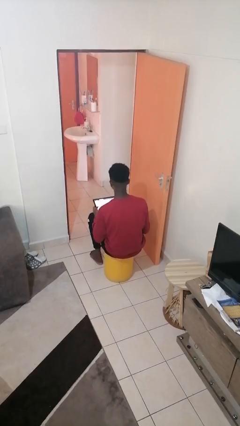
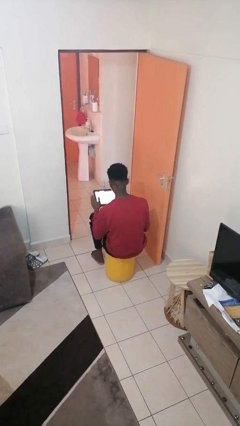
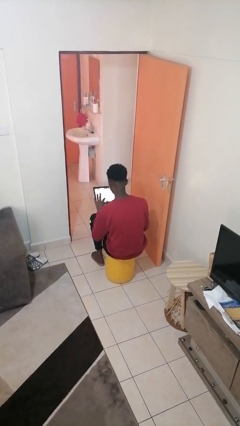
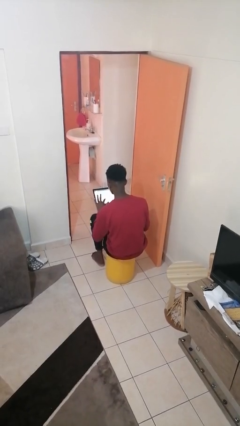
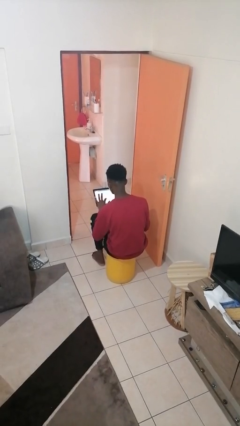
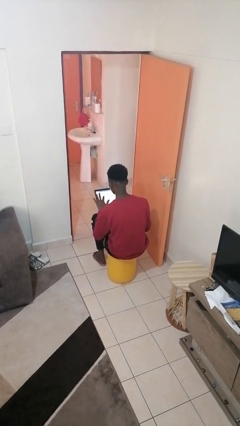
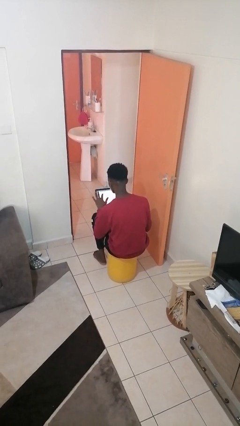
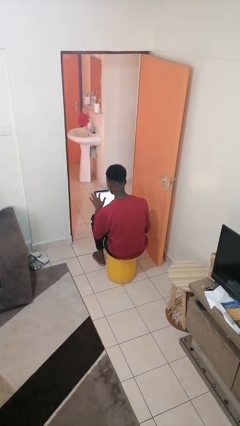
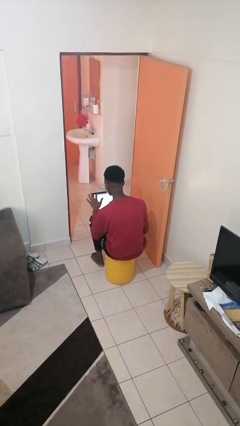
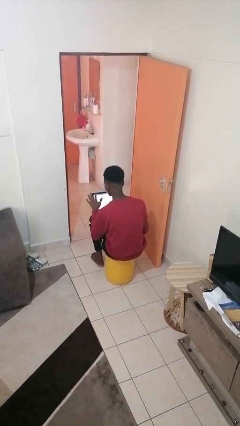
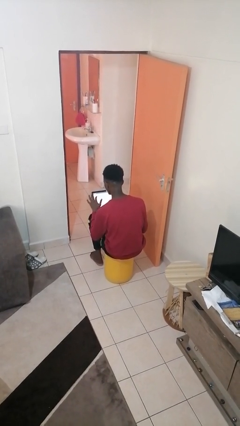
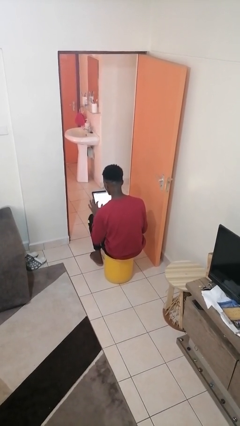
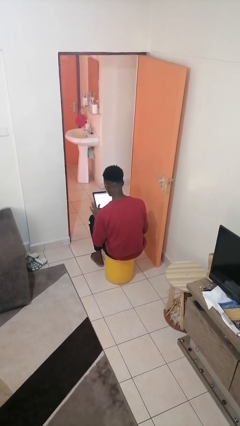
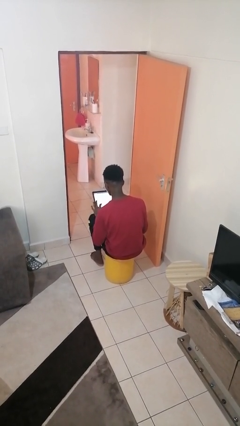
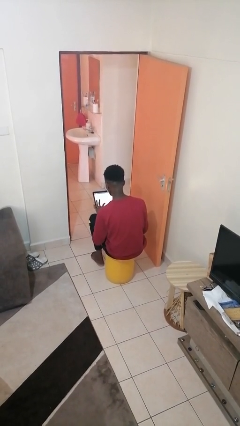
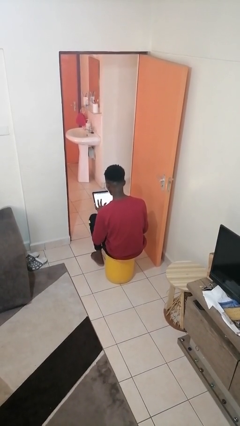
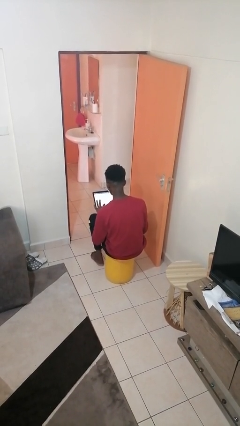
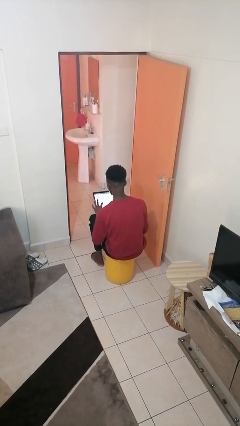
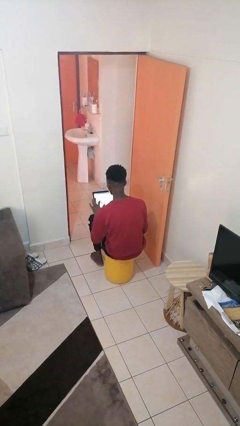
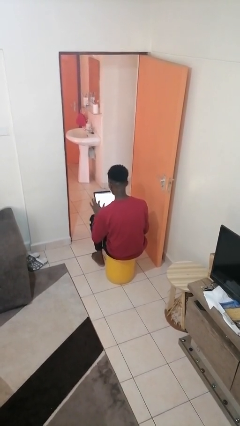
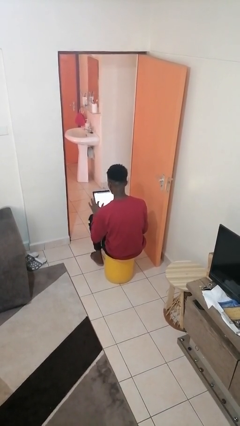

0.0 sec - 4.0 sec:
person interacts with tablet

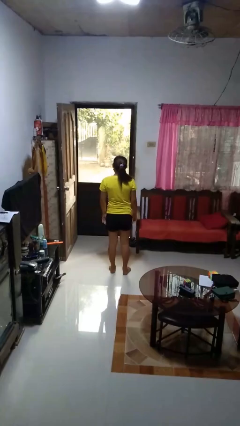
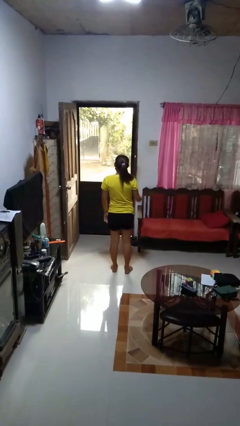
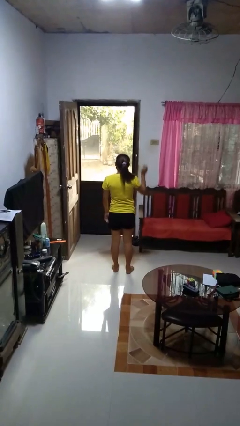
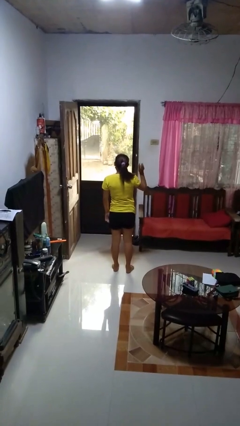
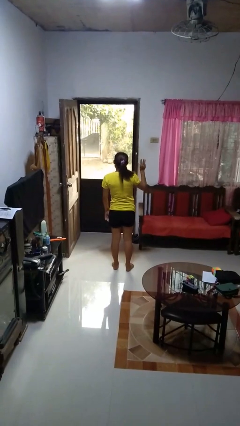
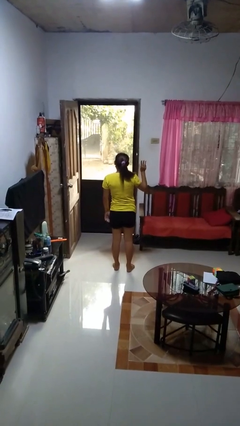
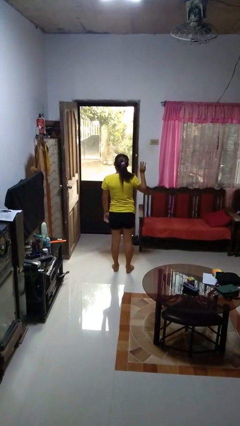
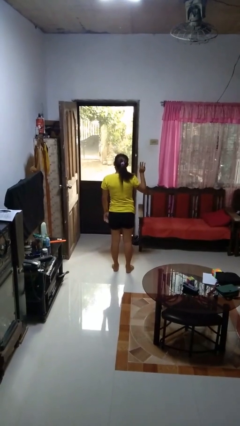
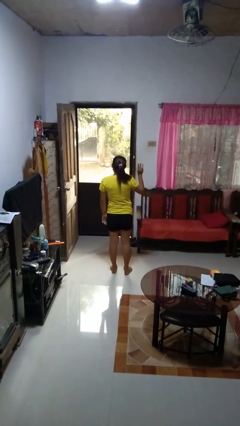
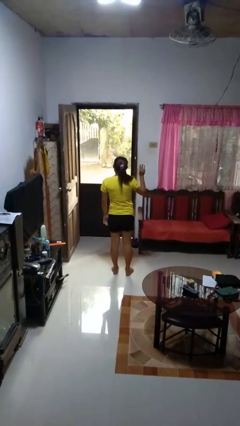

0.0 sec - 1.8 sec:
person gestures number three

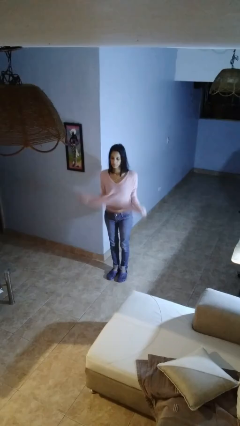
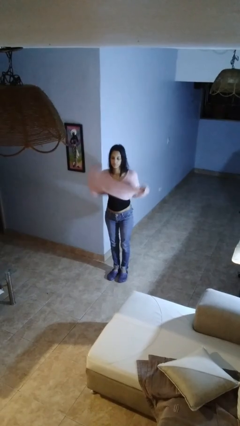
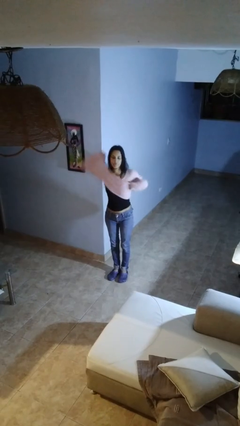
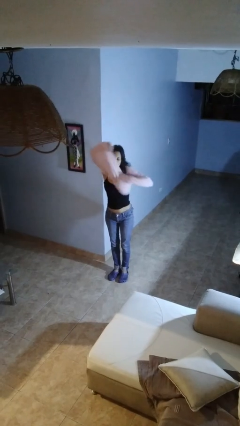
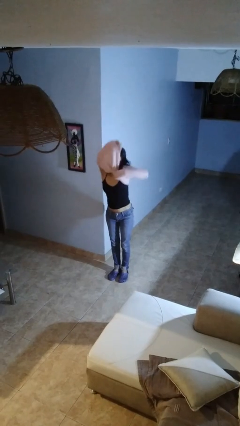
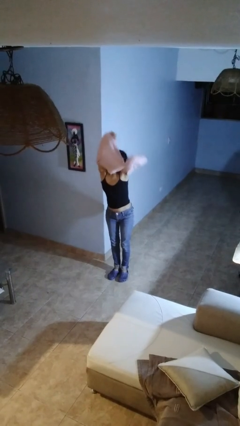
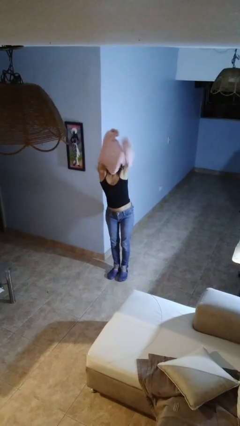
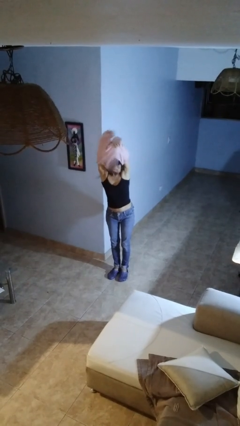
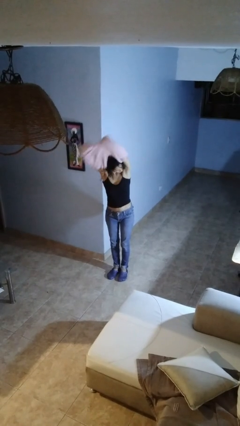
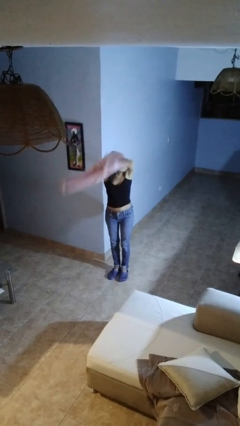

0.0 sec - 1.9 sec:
person takes off shirt

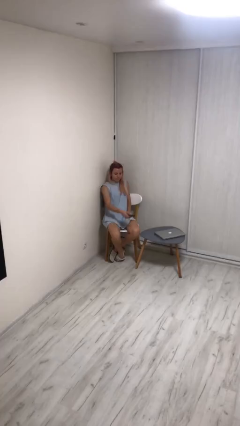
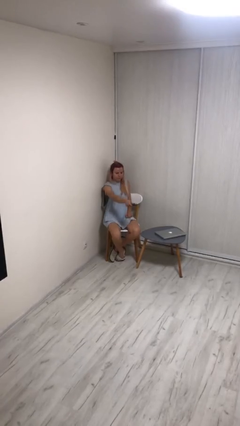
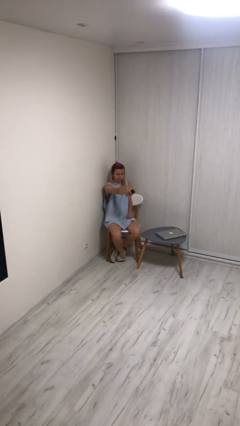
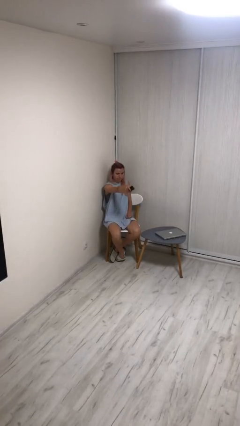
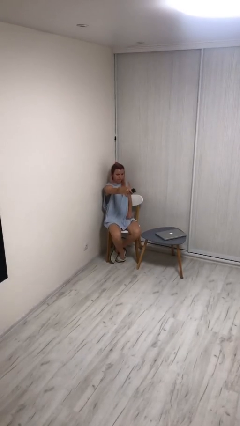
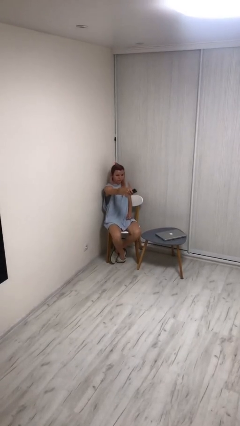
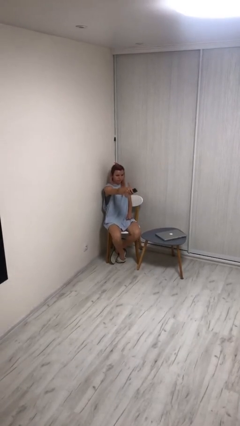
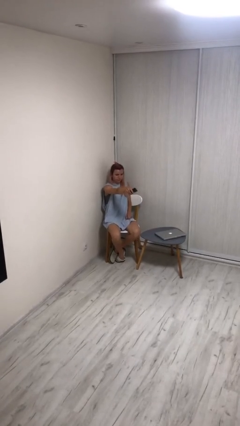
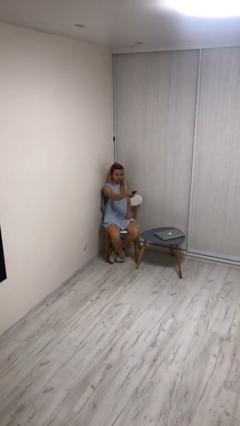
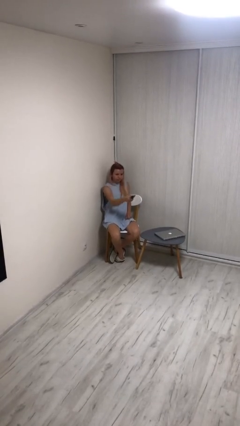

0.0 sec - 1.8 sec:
person uses television remote

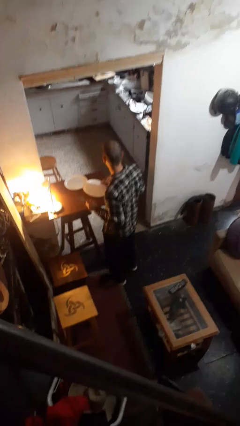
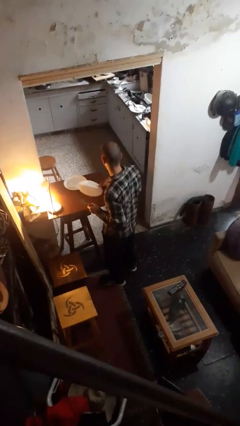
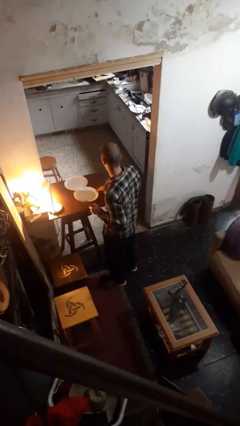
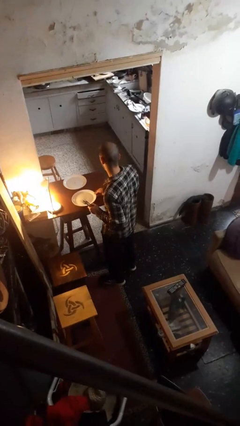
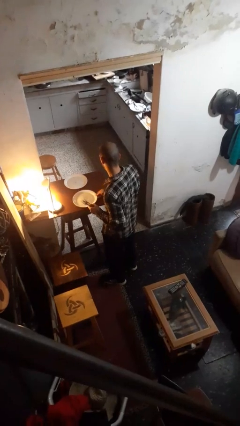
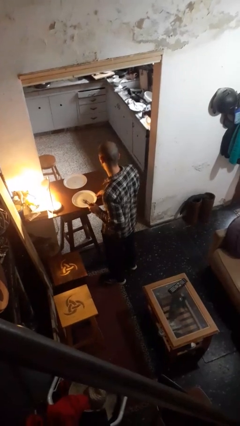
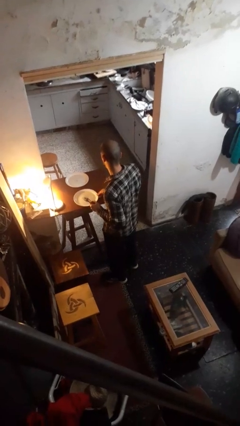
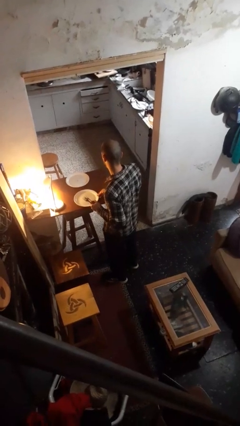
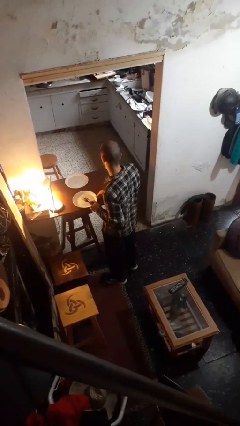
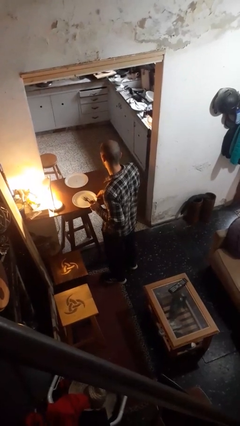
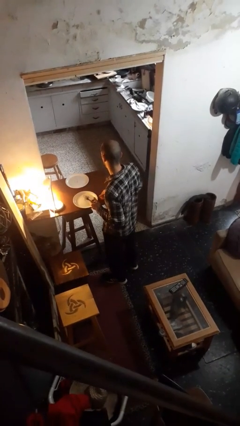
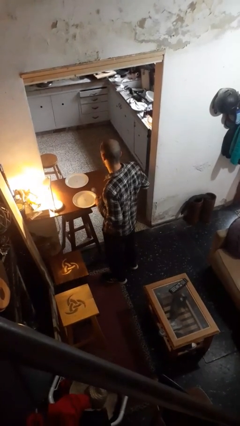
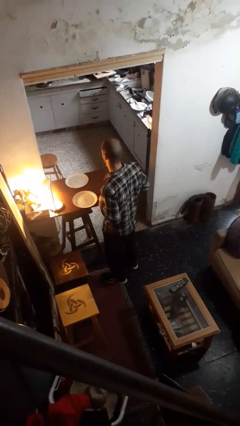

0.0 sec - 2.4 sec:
person sets table

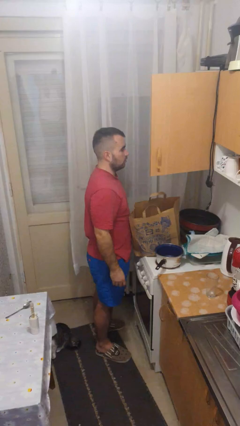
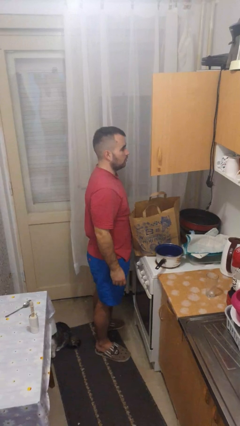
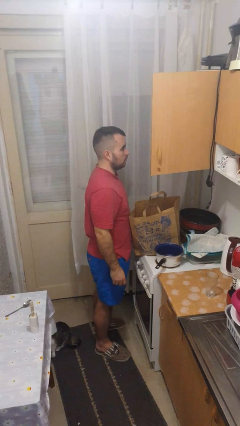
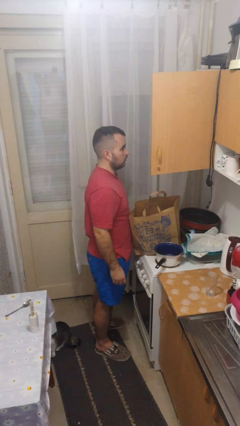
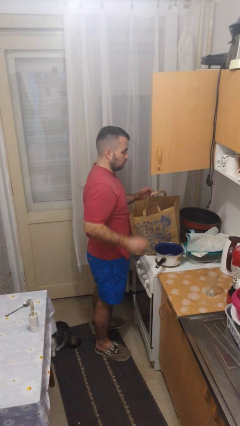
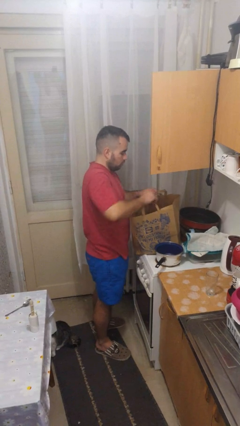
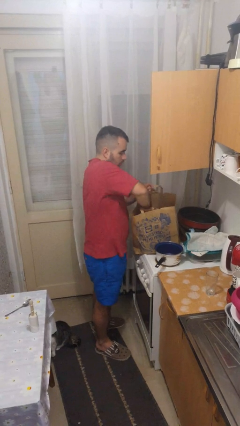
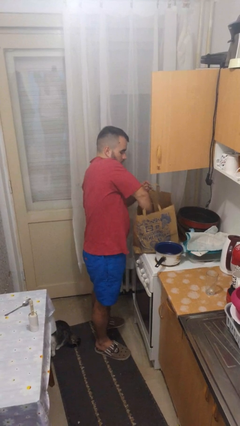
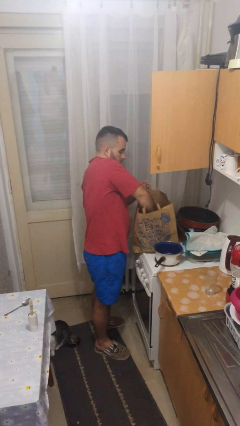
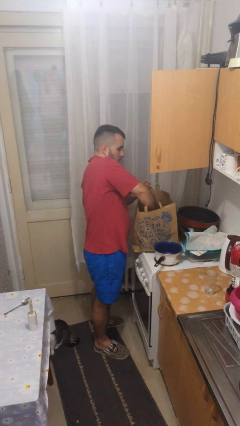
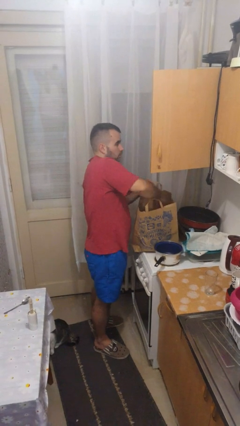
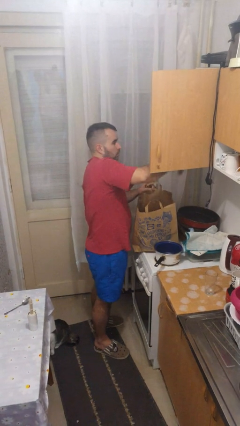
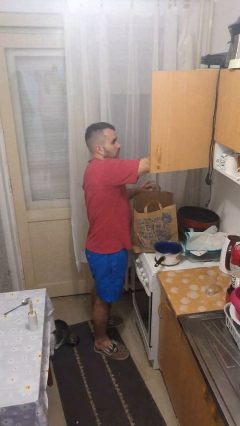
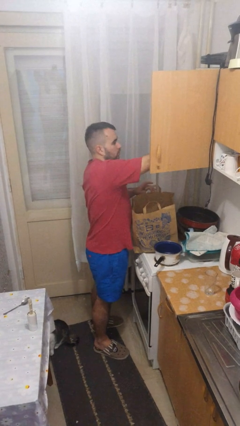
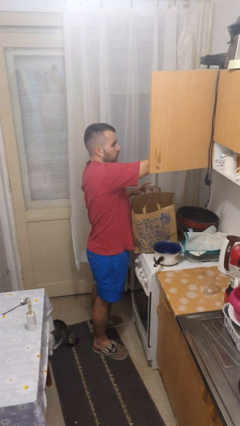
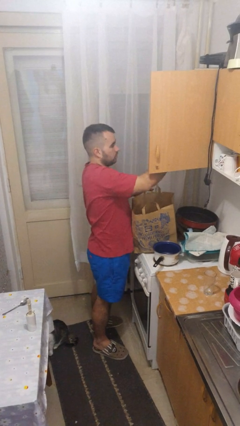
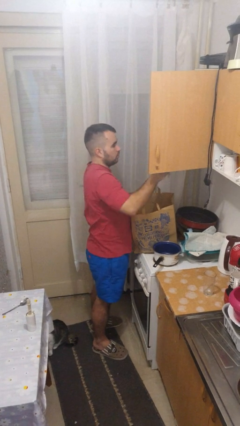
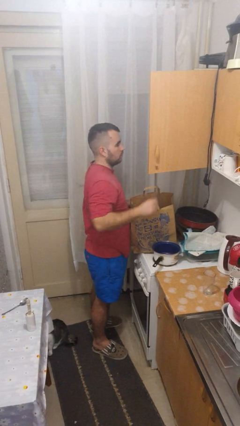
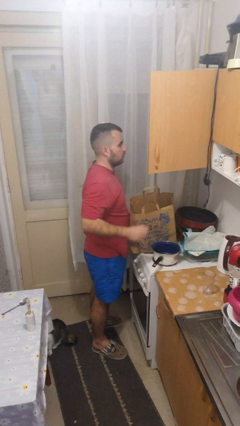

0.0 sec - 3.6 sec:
person loads groceries into cabinet

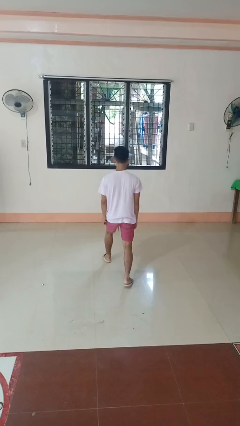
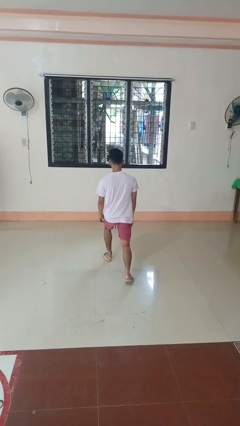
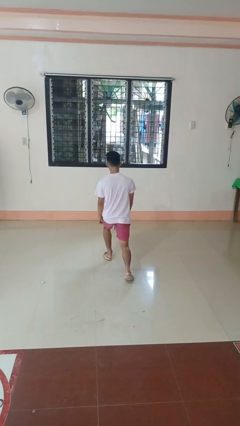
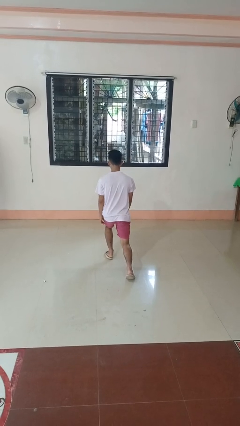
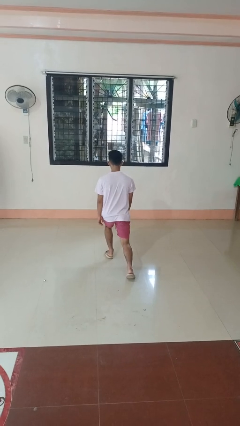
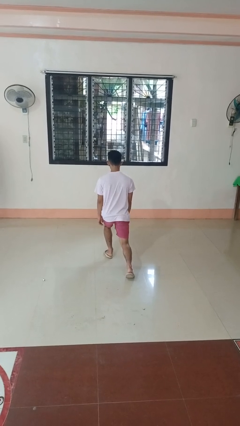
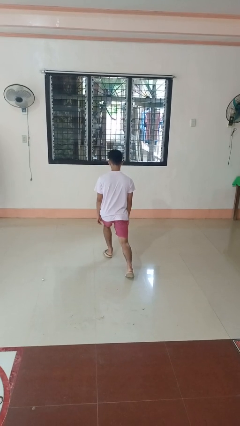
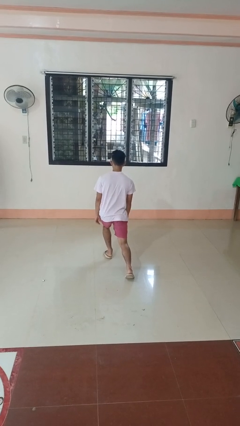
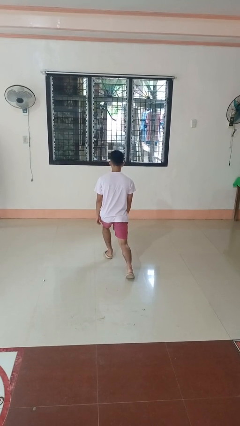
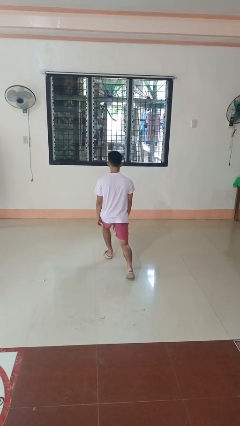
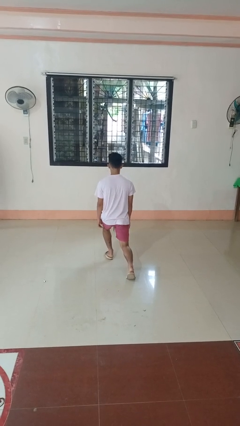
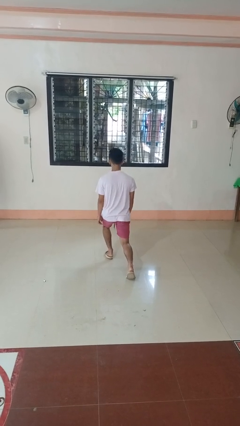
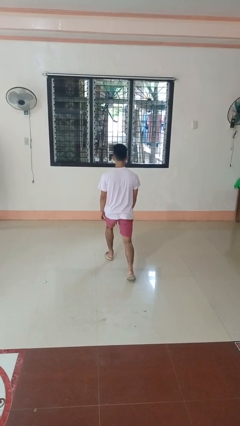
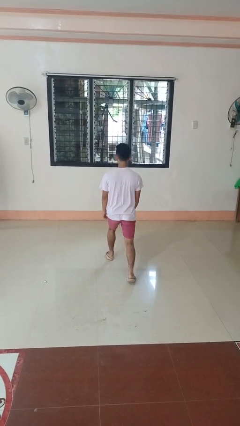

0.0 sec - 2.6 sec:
person exercises with lunges
